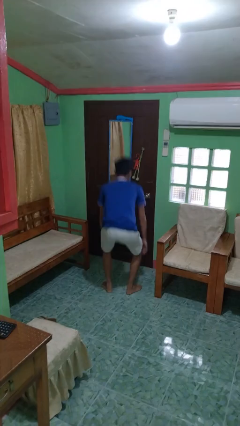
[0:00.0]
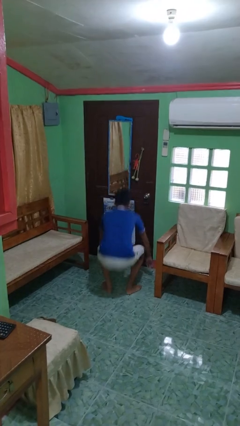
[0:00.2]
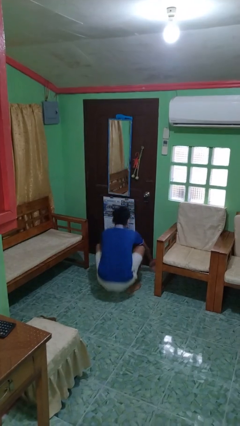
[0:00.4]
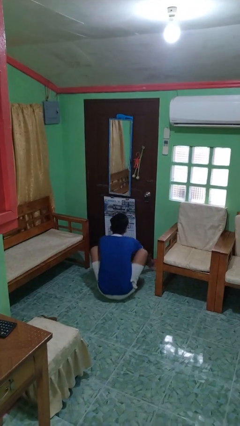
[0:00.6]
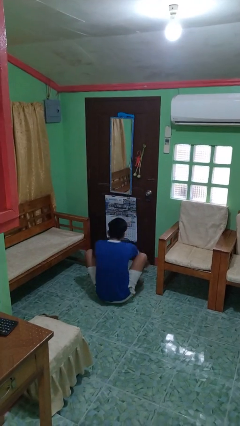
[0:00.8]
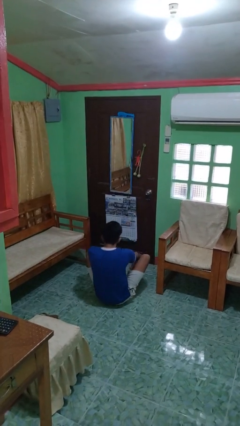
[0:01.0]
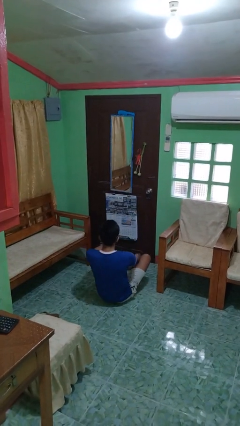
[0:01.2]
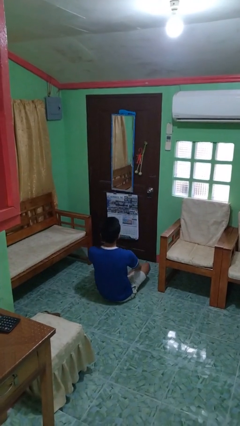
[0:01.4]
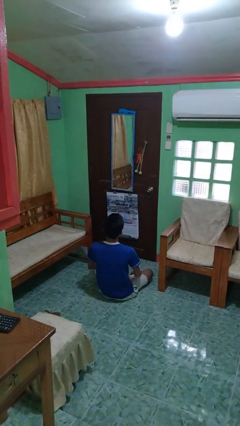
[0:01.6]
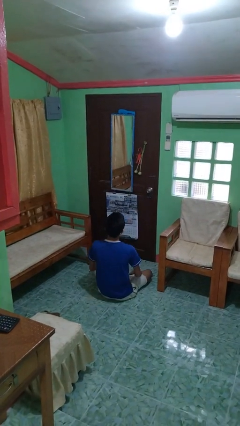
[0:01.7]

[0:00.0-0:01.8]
person sits crisscross

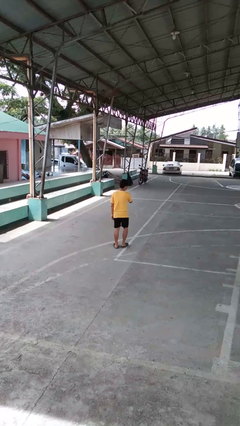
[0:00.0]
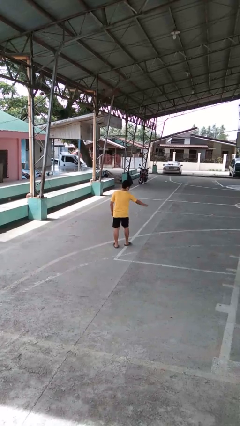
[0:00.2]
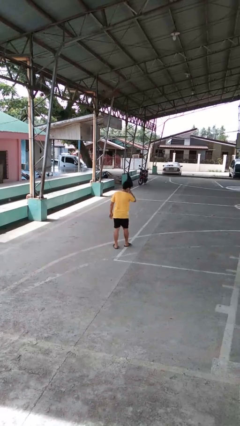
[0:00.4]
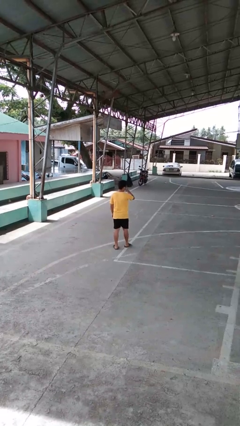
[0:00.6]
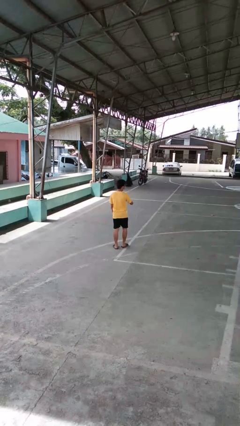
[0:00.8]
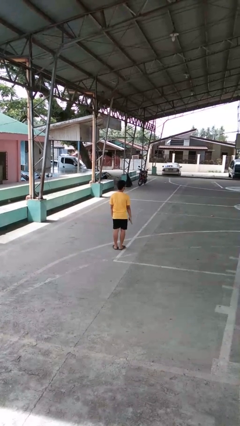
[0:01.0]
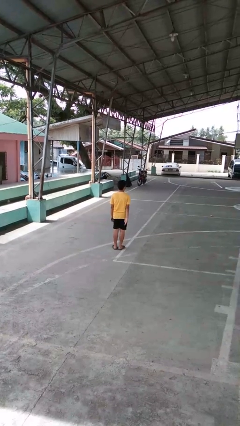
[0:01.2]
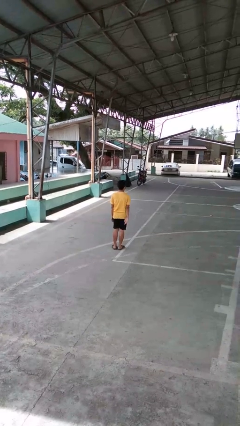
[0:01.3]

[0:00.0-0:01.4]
person karate chop

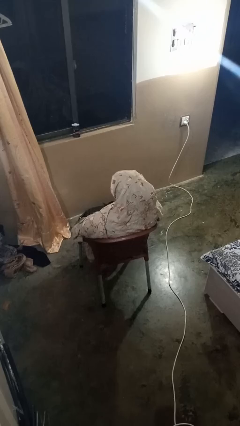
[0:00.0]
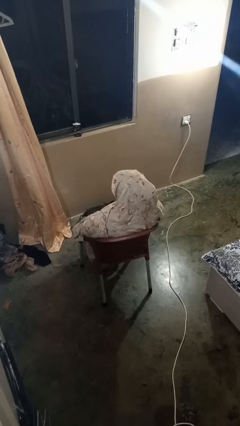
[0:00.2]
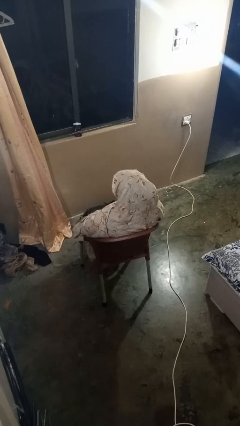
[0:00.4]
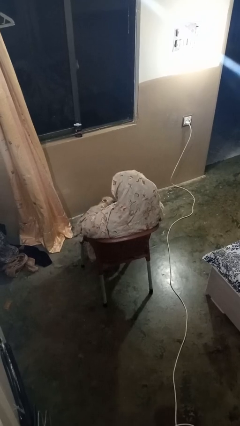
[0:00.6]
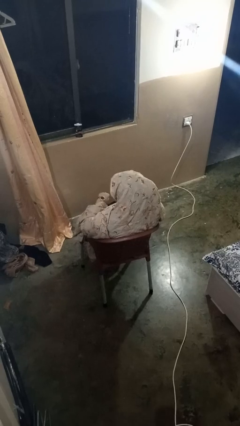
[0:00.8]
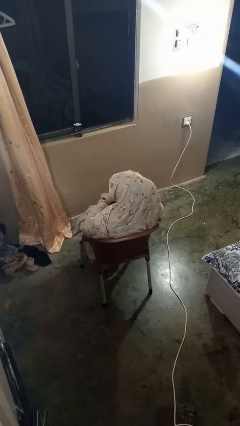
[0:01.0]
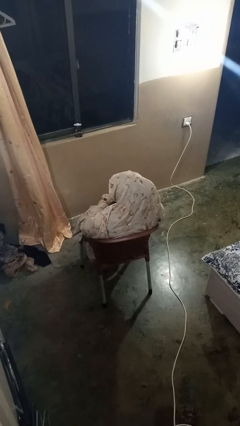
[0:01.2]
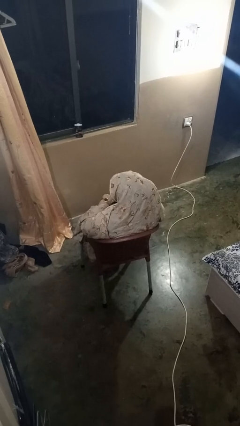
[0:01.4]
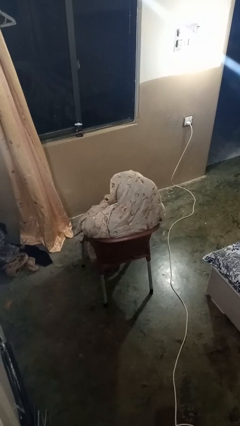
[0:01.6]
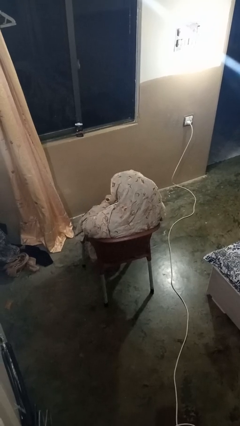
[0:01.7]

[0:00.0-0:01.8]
person looks at wristwatch

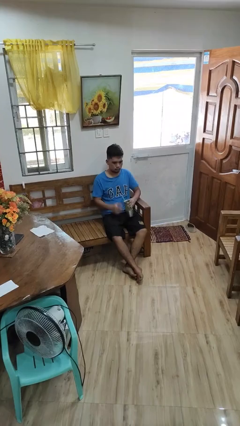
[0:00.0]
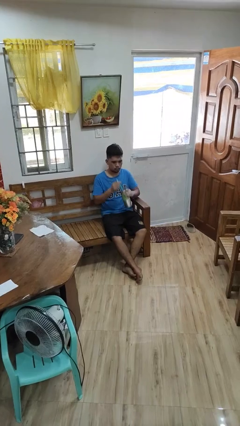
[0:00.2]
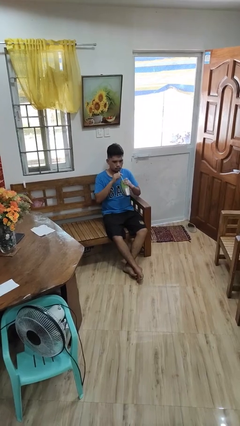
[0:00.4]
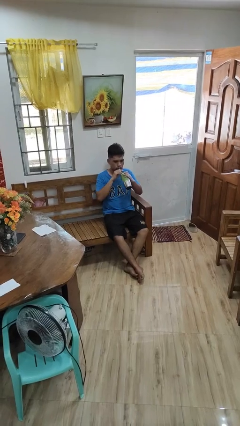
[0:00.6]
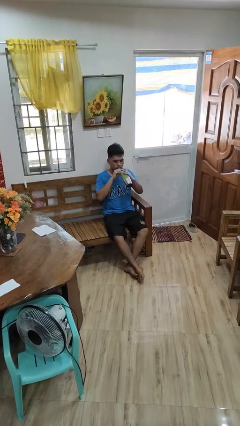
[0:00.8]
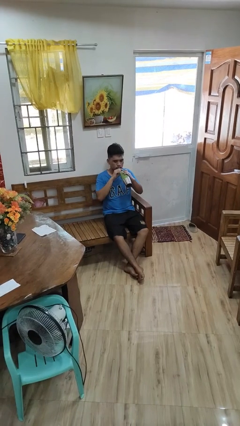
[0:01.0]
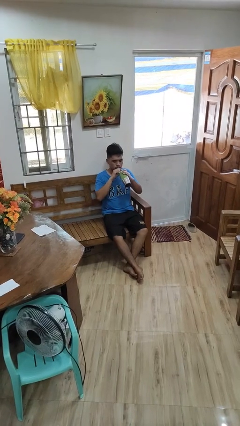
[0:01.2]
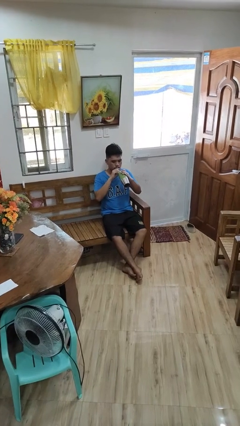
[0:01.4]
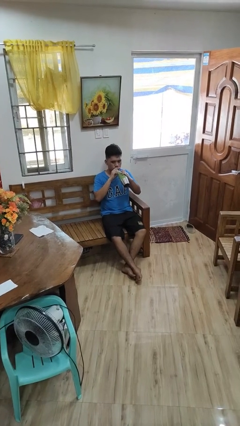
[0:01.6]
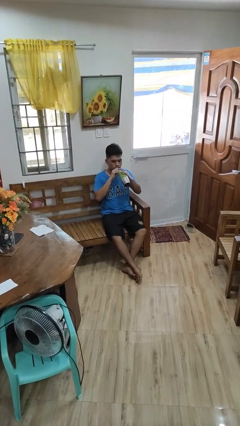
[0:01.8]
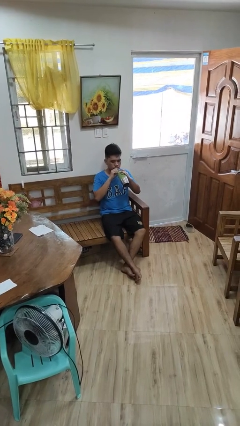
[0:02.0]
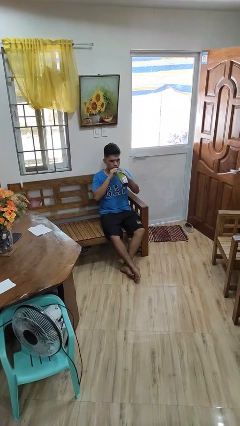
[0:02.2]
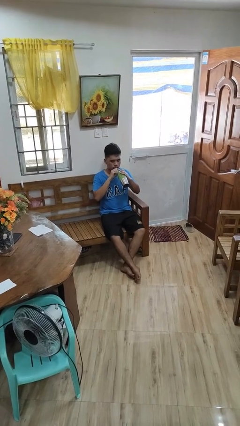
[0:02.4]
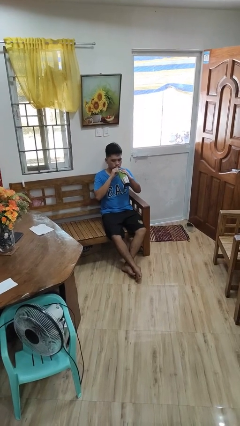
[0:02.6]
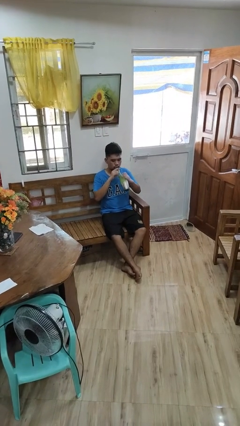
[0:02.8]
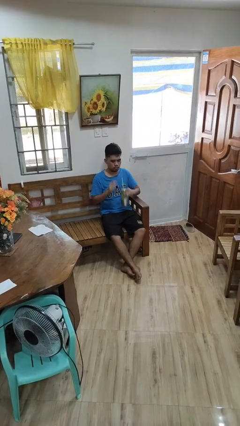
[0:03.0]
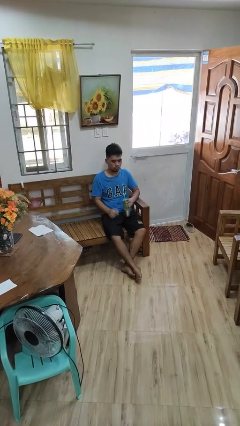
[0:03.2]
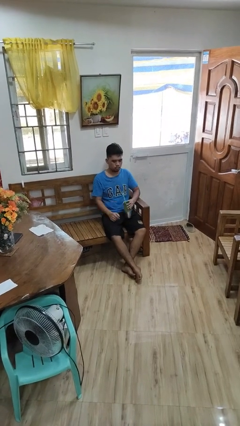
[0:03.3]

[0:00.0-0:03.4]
person drinks from straw

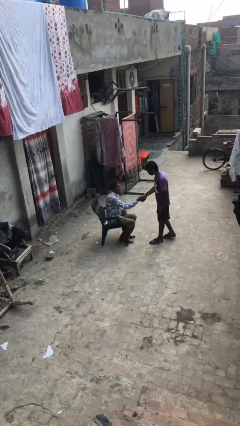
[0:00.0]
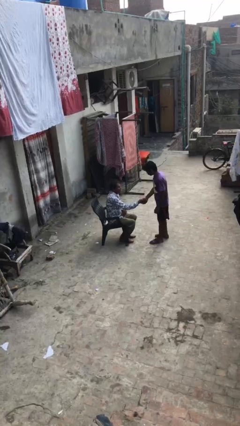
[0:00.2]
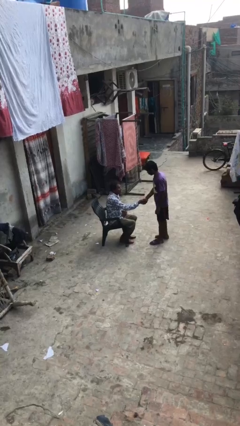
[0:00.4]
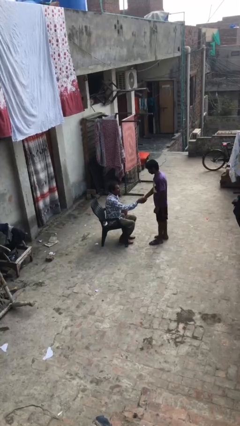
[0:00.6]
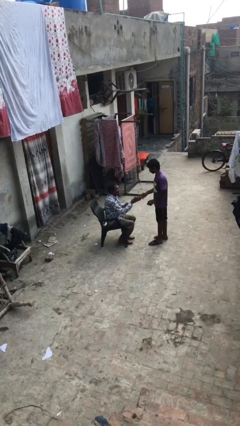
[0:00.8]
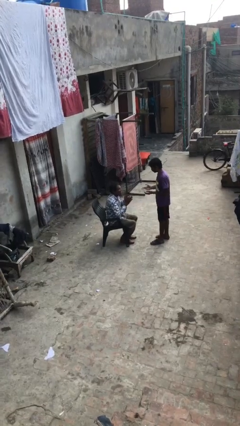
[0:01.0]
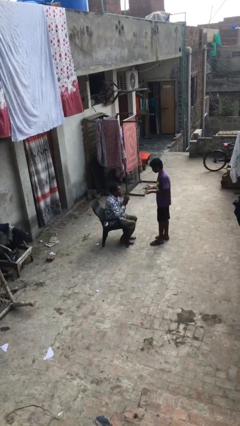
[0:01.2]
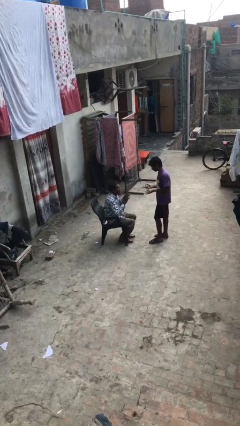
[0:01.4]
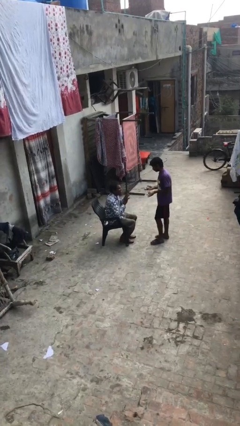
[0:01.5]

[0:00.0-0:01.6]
person shakes hand

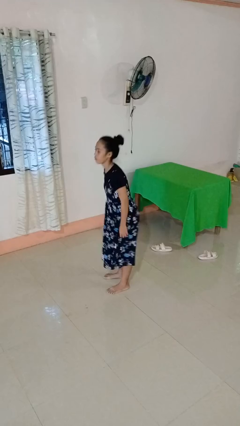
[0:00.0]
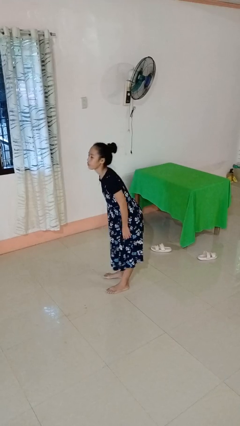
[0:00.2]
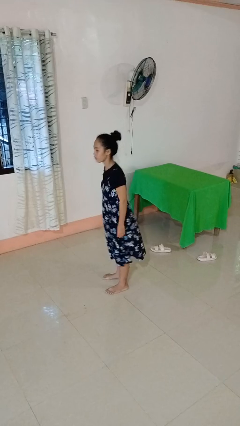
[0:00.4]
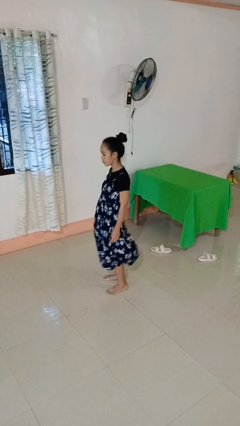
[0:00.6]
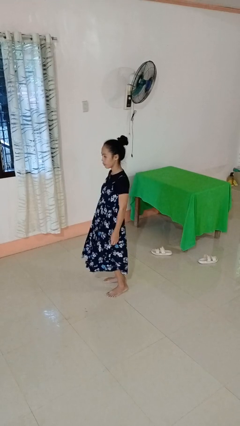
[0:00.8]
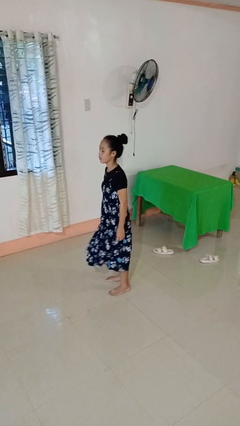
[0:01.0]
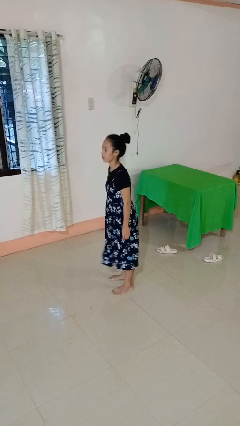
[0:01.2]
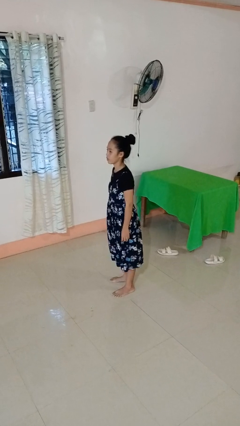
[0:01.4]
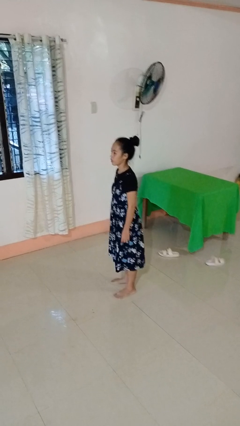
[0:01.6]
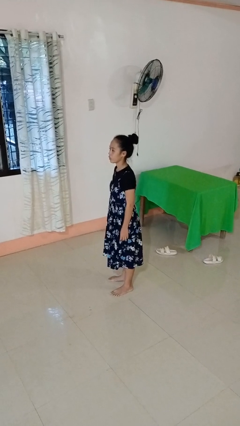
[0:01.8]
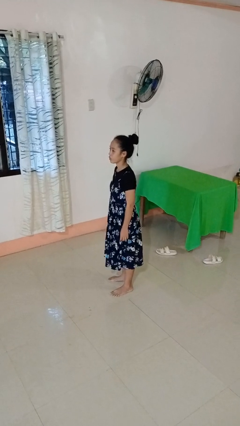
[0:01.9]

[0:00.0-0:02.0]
person wiggles hips

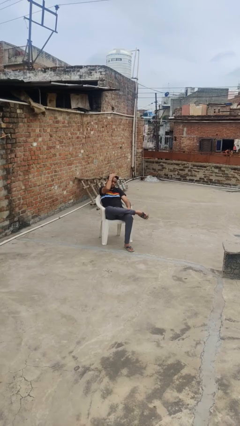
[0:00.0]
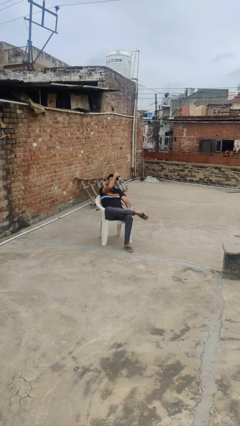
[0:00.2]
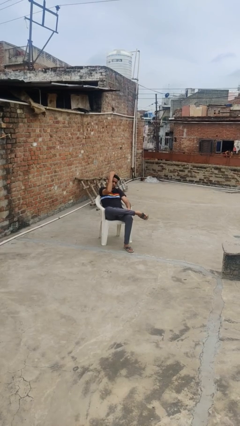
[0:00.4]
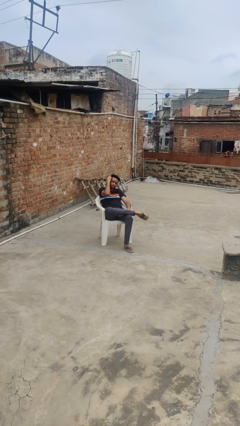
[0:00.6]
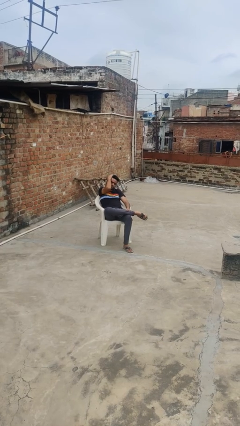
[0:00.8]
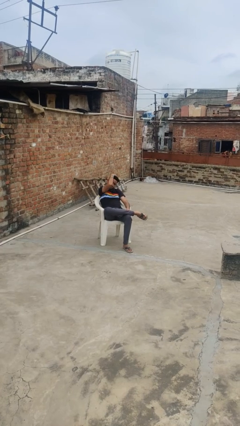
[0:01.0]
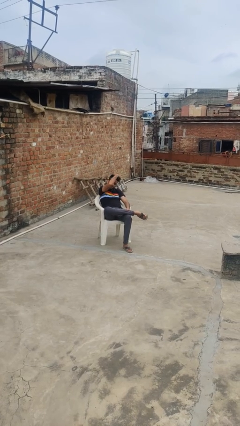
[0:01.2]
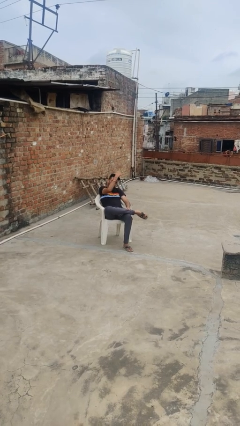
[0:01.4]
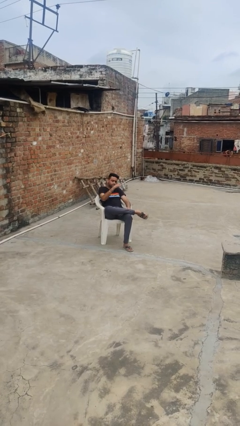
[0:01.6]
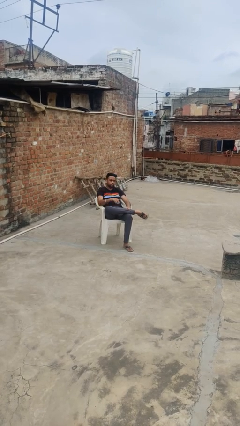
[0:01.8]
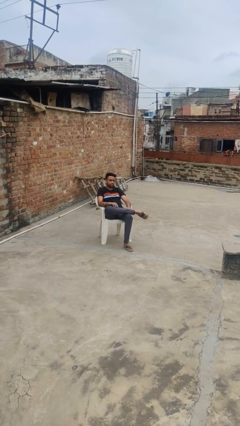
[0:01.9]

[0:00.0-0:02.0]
person strokes hair

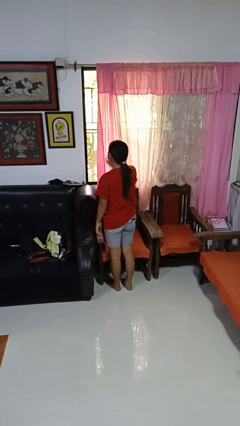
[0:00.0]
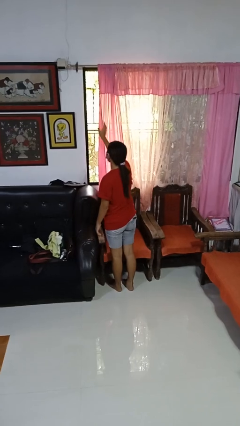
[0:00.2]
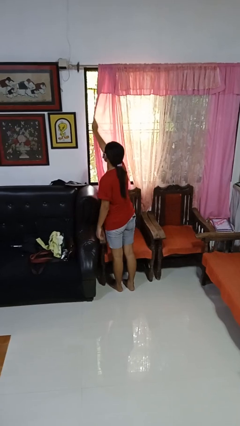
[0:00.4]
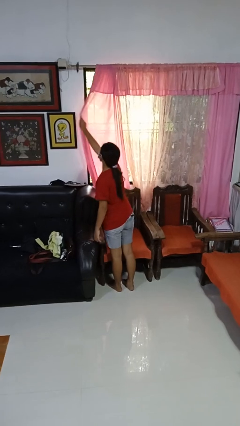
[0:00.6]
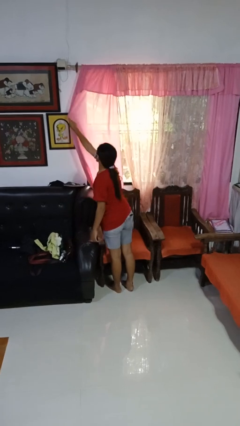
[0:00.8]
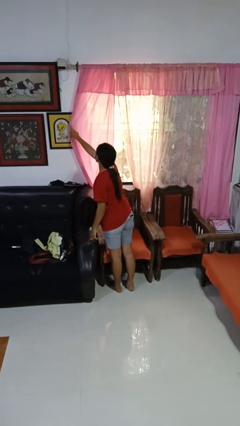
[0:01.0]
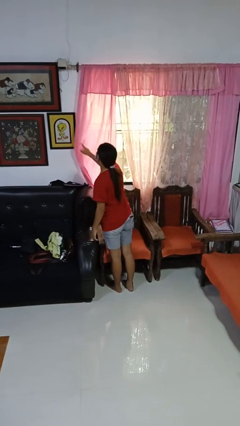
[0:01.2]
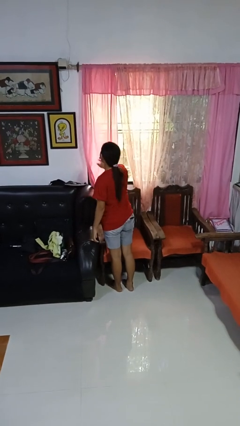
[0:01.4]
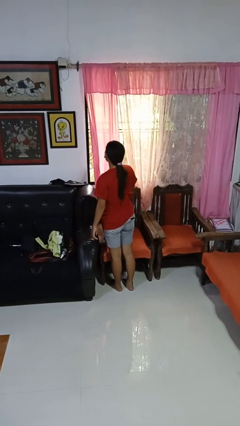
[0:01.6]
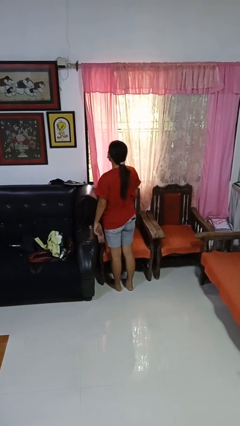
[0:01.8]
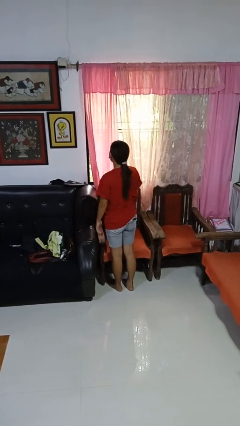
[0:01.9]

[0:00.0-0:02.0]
person closes curtains

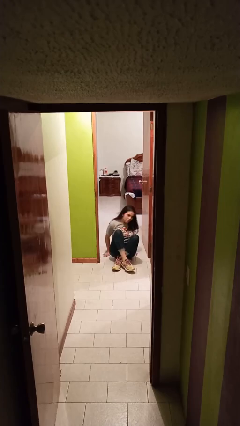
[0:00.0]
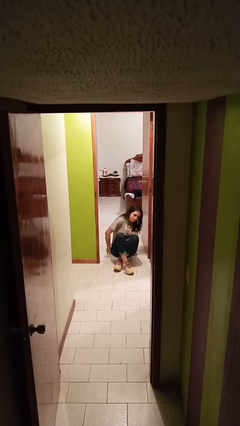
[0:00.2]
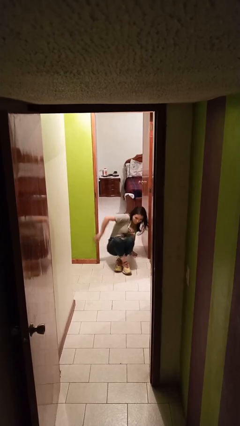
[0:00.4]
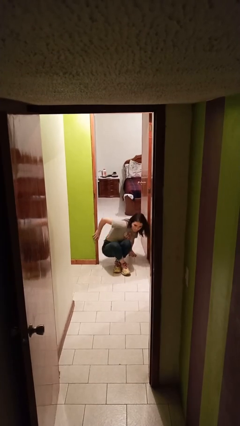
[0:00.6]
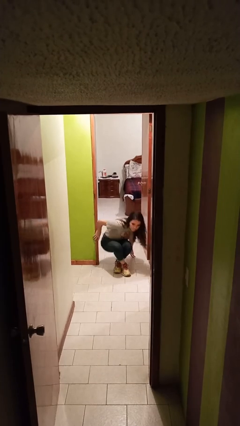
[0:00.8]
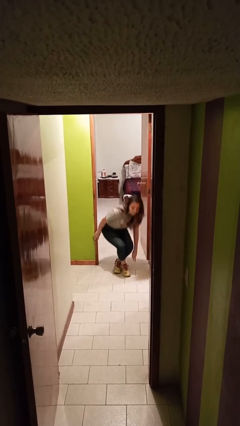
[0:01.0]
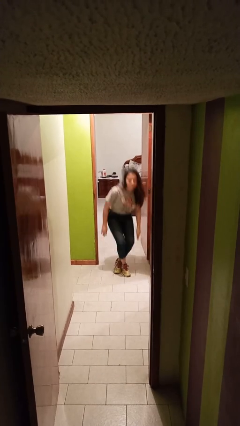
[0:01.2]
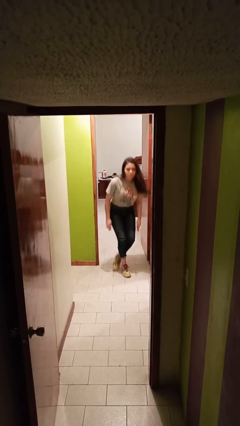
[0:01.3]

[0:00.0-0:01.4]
person stands up
